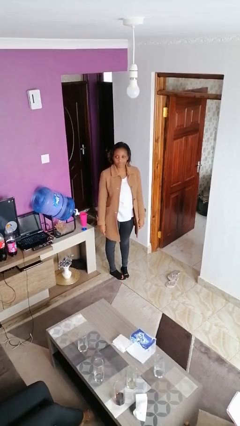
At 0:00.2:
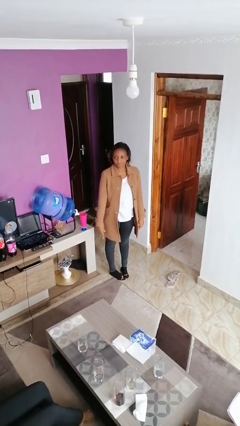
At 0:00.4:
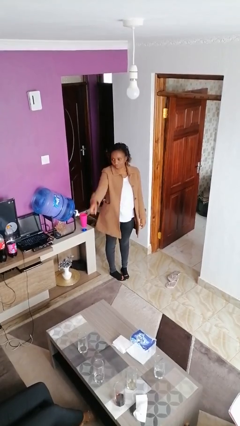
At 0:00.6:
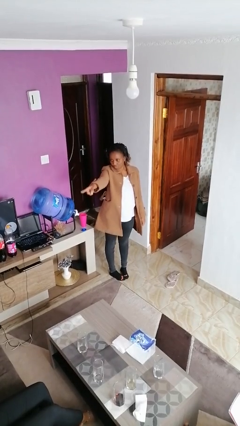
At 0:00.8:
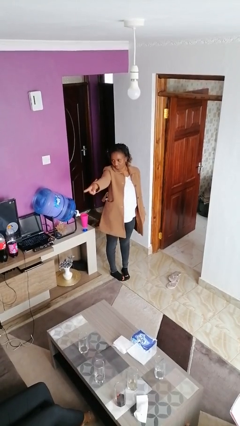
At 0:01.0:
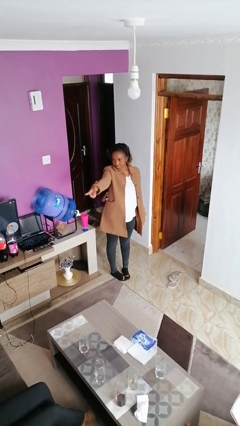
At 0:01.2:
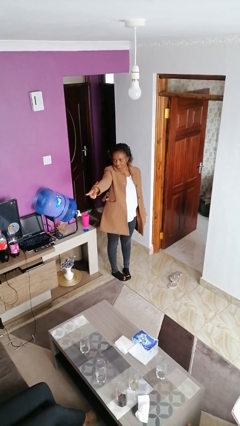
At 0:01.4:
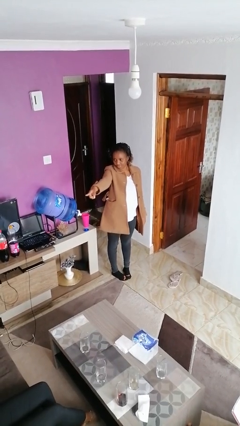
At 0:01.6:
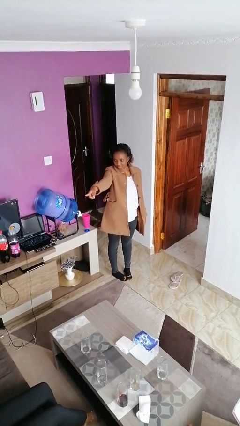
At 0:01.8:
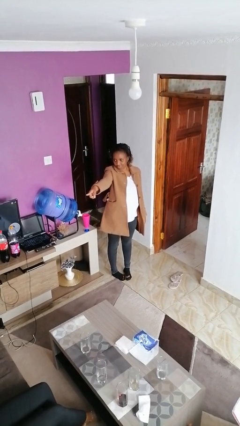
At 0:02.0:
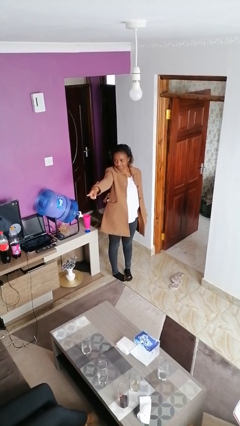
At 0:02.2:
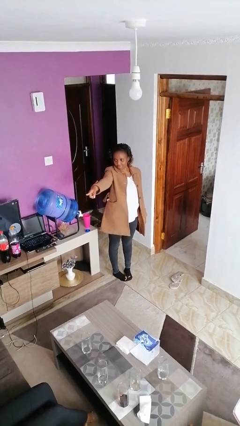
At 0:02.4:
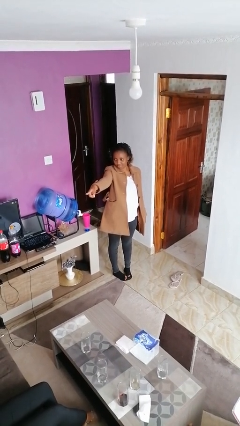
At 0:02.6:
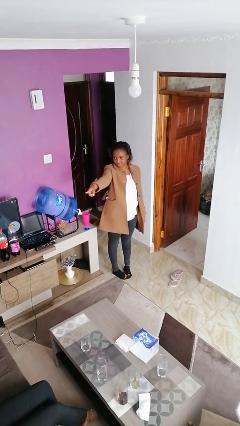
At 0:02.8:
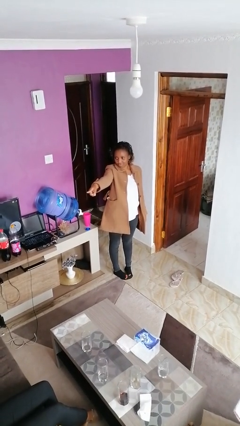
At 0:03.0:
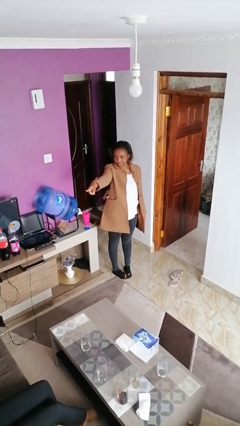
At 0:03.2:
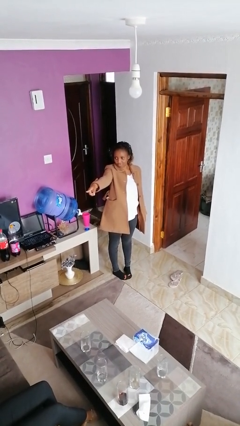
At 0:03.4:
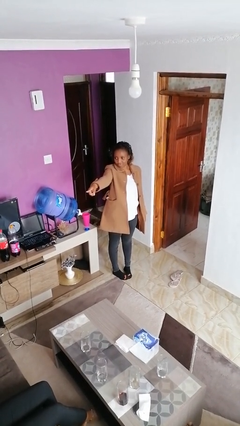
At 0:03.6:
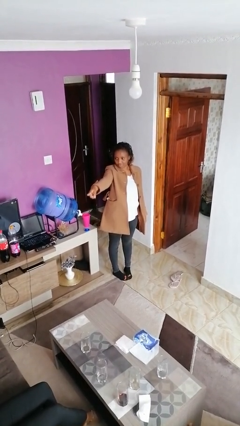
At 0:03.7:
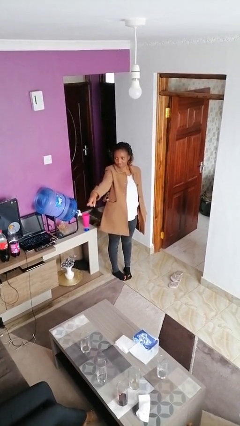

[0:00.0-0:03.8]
person points at person

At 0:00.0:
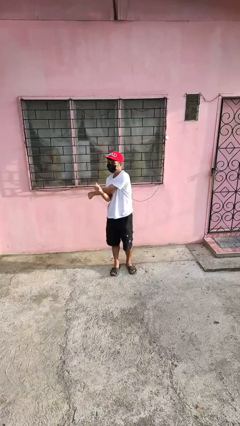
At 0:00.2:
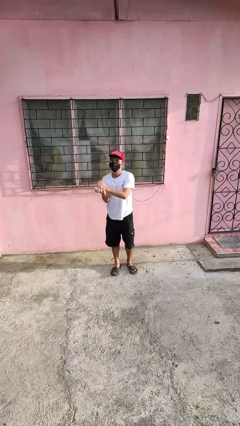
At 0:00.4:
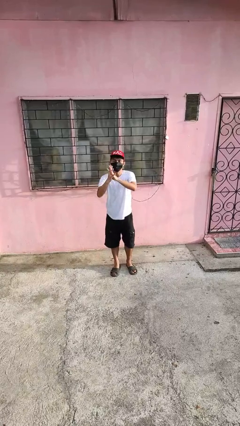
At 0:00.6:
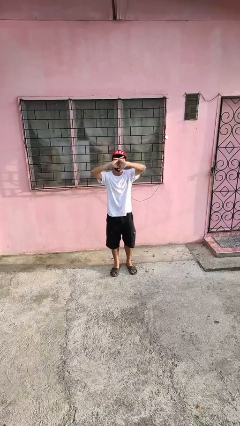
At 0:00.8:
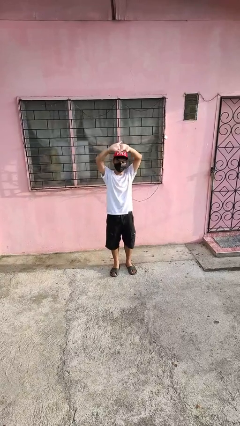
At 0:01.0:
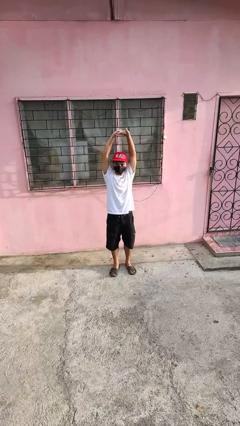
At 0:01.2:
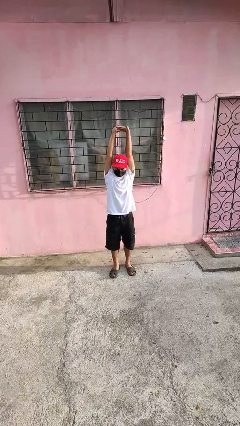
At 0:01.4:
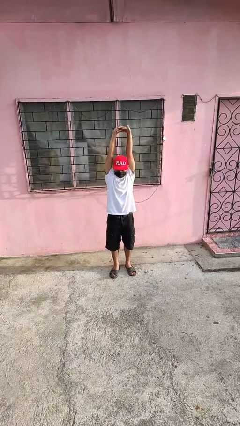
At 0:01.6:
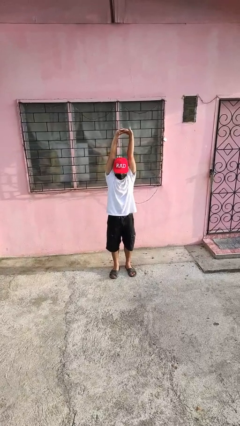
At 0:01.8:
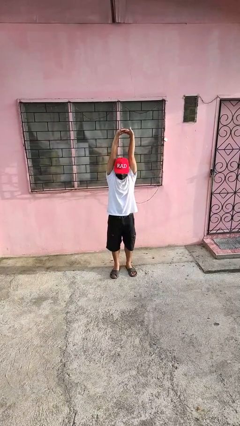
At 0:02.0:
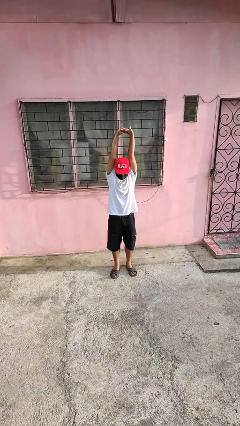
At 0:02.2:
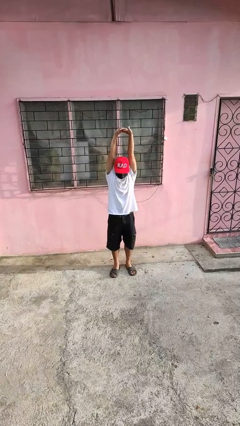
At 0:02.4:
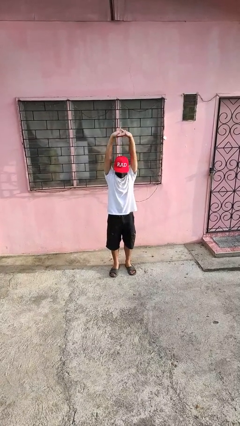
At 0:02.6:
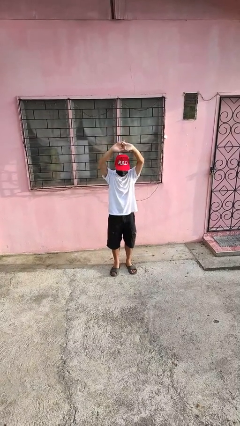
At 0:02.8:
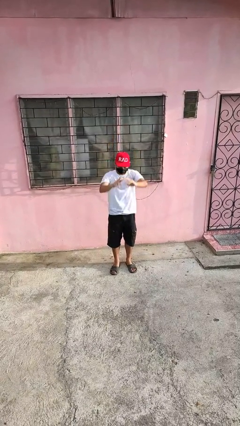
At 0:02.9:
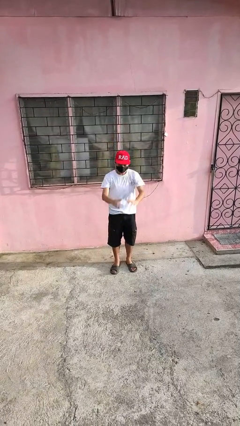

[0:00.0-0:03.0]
person stretches arms over head

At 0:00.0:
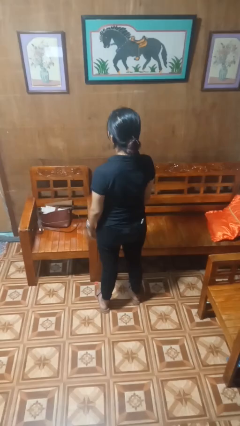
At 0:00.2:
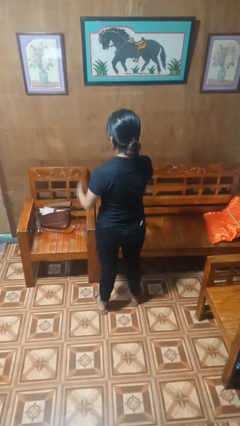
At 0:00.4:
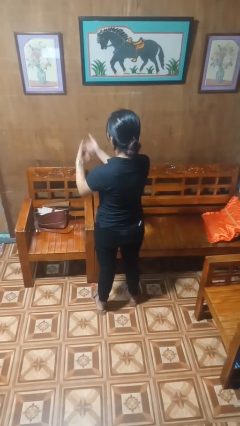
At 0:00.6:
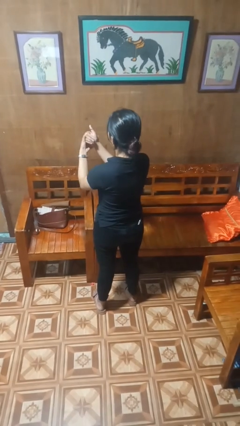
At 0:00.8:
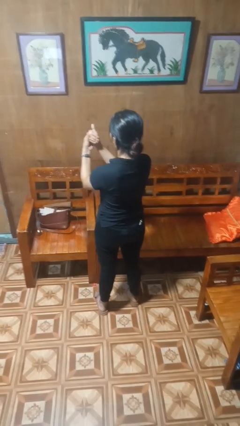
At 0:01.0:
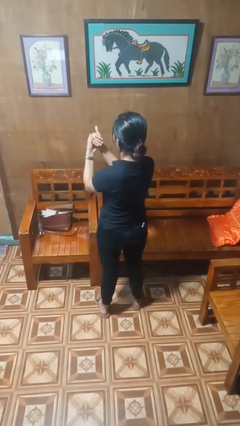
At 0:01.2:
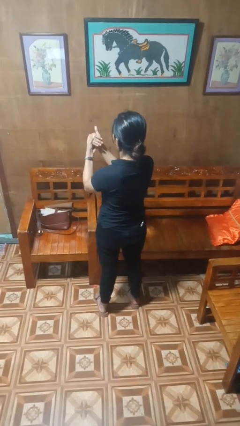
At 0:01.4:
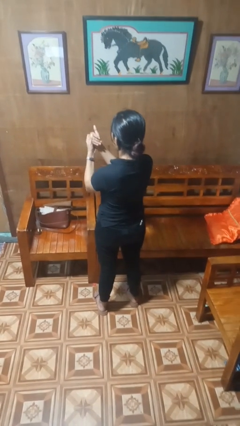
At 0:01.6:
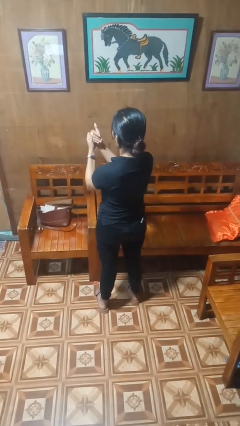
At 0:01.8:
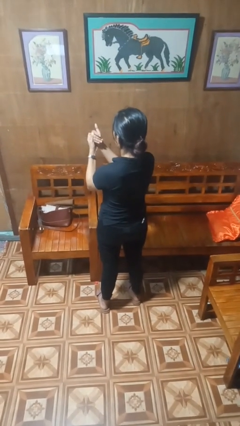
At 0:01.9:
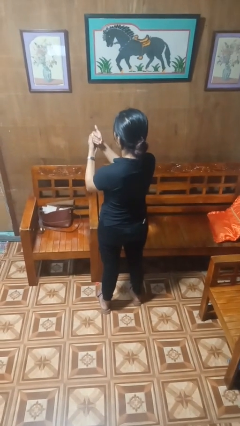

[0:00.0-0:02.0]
person cracks knuckles

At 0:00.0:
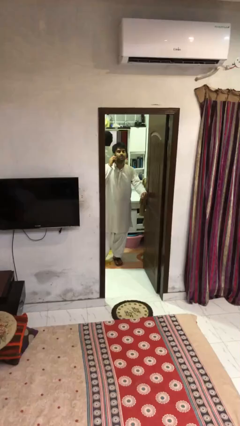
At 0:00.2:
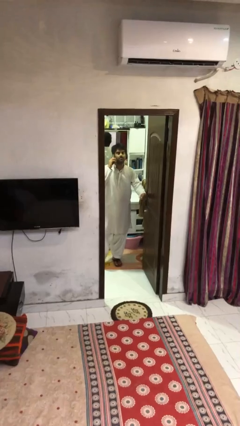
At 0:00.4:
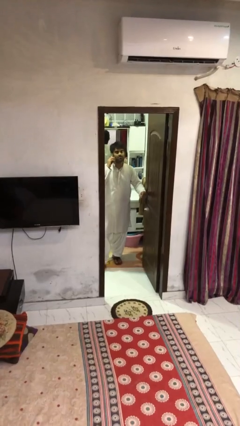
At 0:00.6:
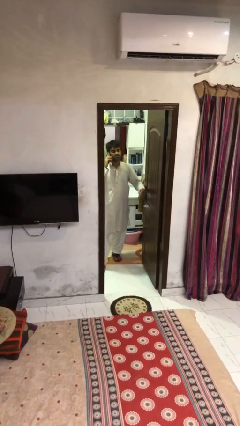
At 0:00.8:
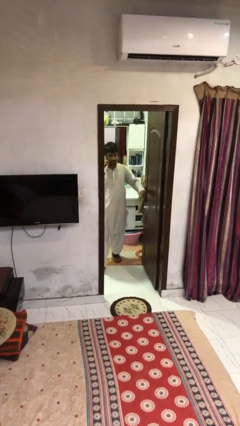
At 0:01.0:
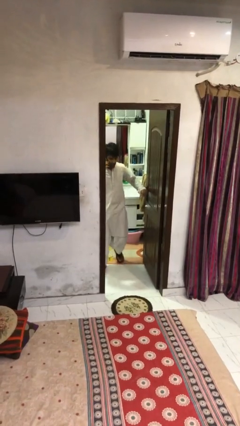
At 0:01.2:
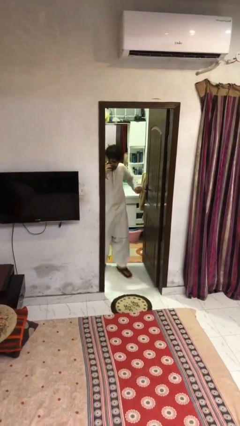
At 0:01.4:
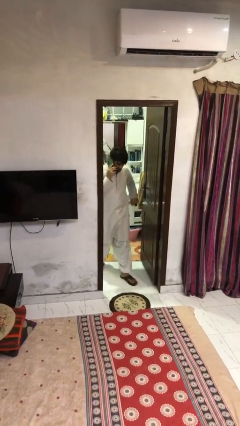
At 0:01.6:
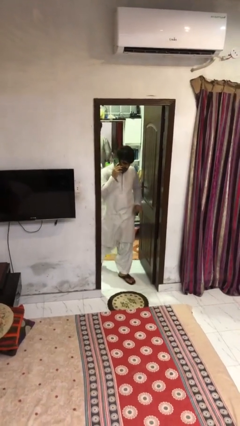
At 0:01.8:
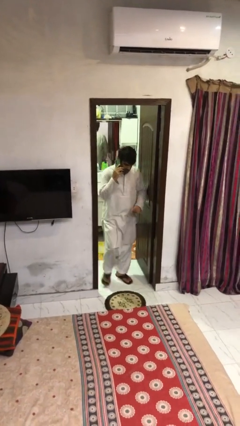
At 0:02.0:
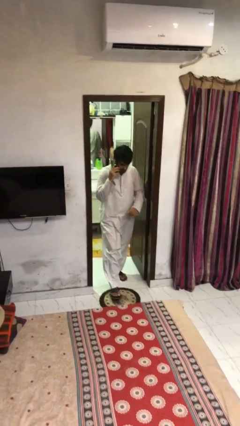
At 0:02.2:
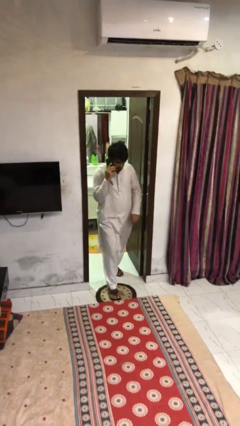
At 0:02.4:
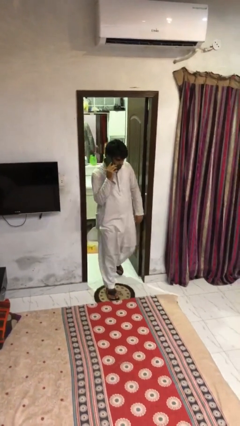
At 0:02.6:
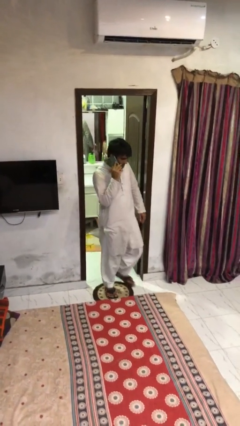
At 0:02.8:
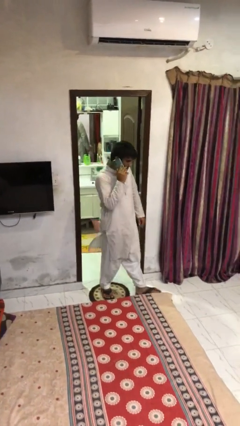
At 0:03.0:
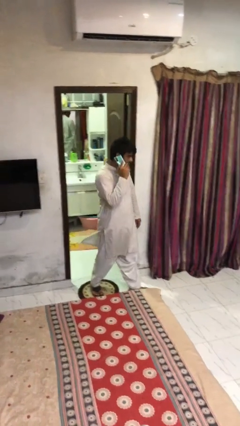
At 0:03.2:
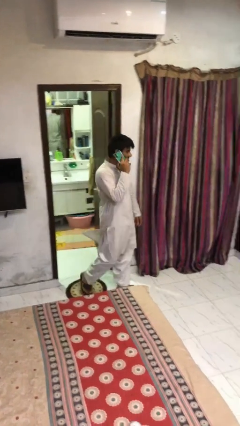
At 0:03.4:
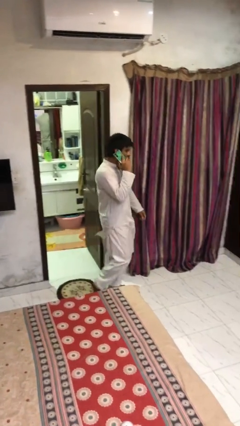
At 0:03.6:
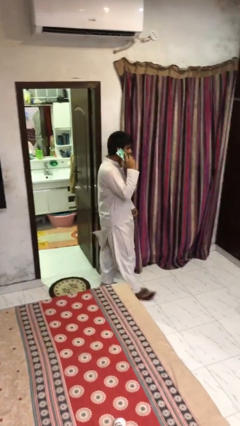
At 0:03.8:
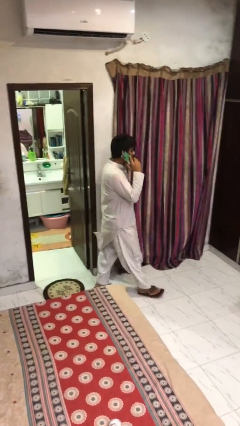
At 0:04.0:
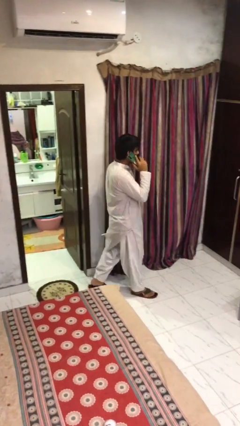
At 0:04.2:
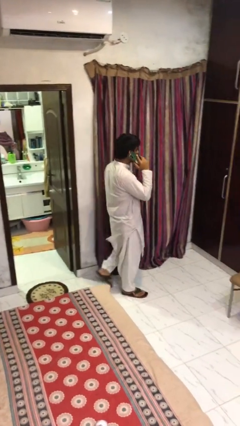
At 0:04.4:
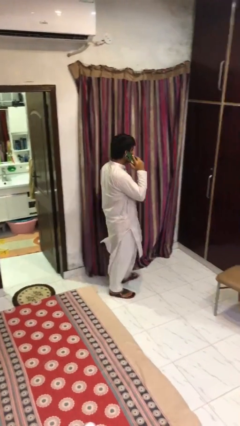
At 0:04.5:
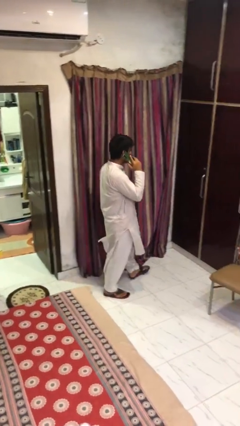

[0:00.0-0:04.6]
person enters scene through structure

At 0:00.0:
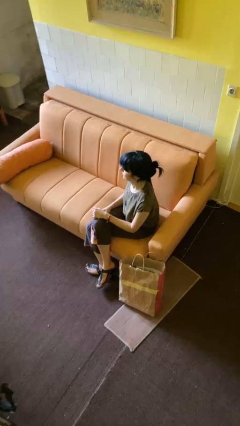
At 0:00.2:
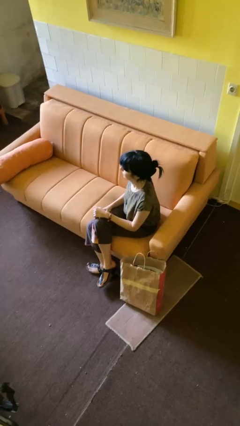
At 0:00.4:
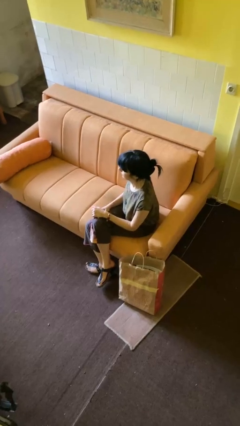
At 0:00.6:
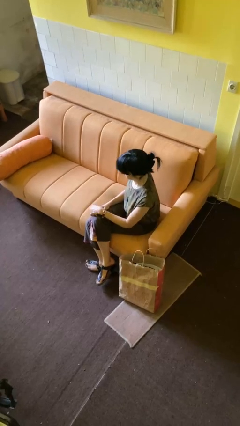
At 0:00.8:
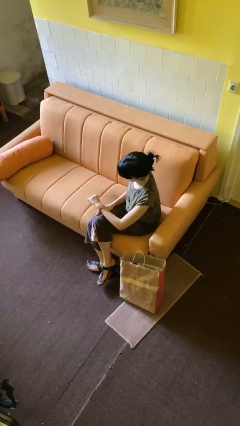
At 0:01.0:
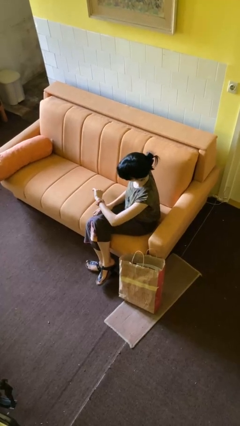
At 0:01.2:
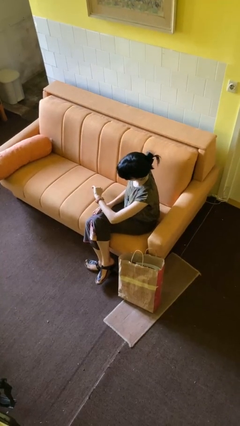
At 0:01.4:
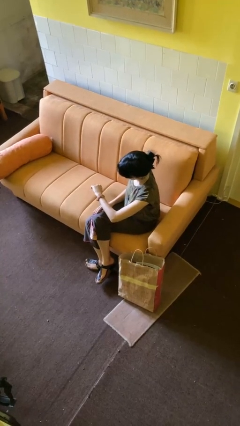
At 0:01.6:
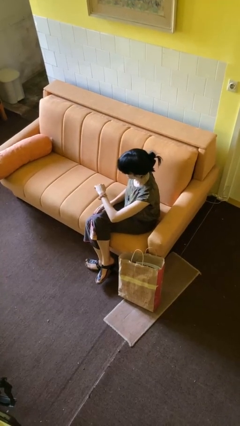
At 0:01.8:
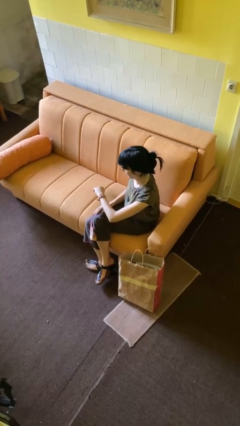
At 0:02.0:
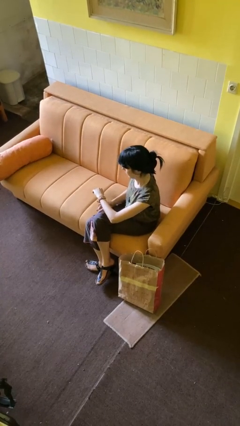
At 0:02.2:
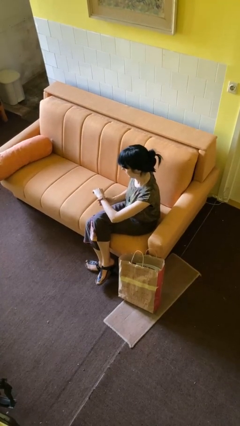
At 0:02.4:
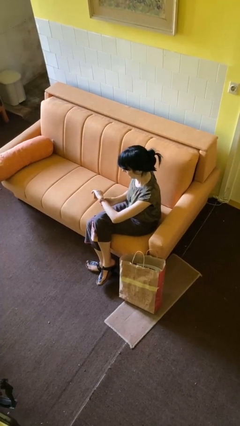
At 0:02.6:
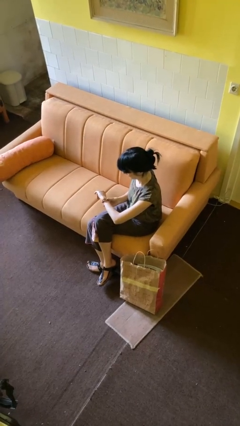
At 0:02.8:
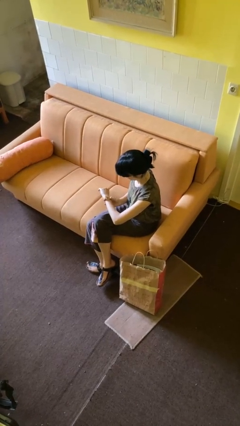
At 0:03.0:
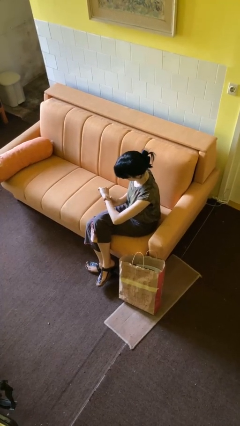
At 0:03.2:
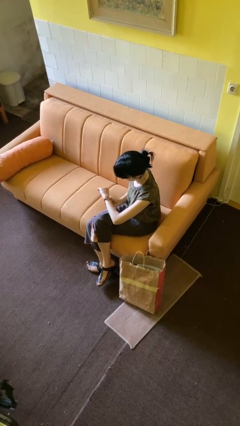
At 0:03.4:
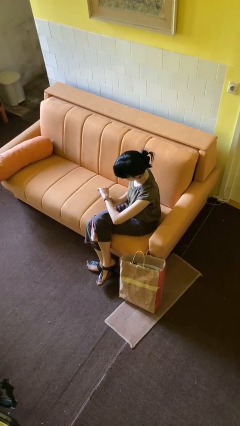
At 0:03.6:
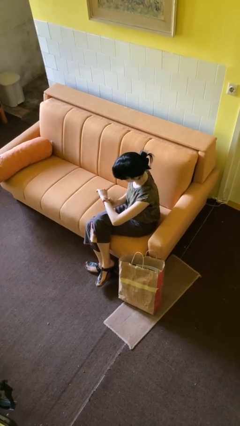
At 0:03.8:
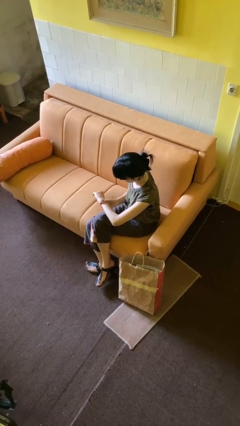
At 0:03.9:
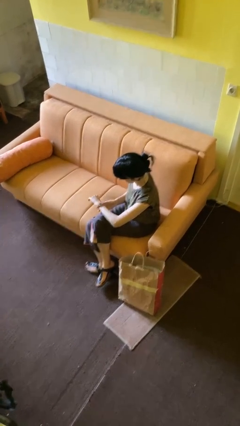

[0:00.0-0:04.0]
person looks at wristwatch

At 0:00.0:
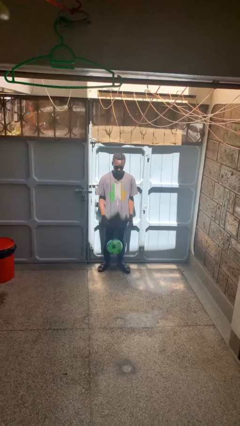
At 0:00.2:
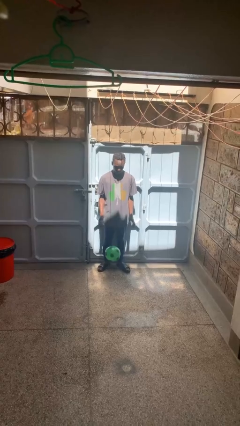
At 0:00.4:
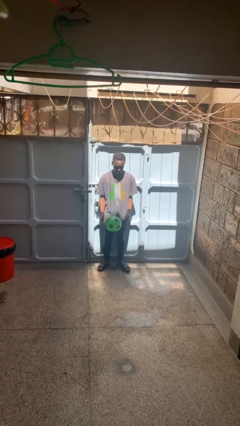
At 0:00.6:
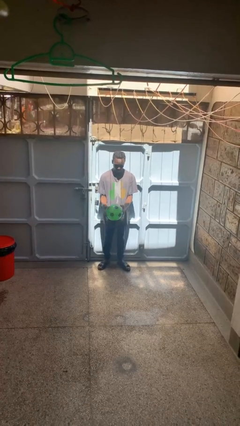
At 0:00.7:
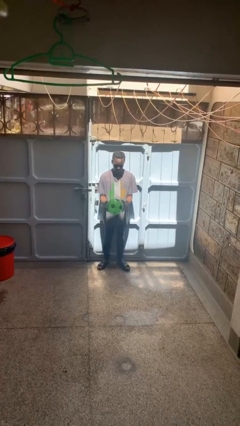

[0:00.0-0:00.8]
person bounces ball on floor
